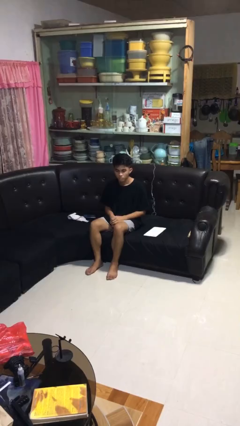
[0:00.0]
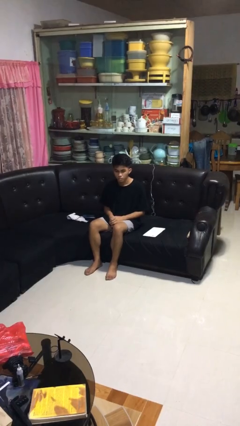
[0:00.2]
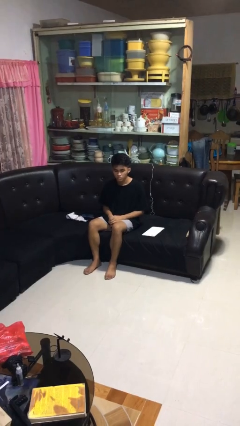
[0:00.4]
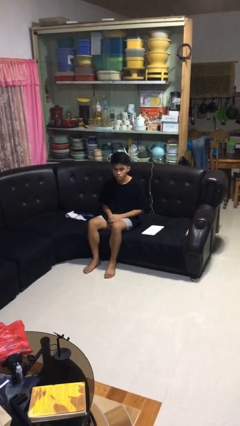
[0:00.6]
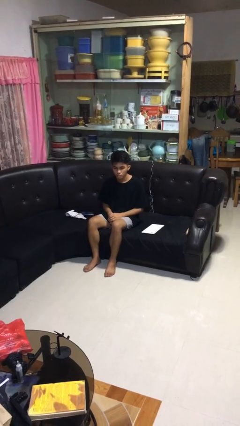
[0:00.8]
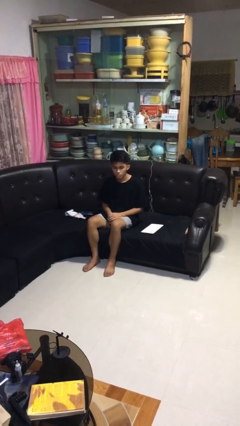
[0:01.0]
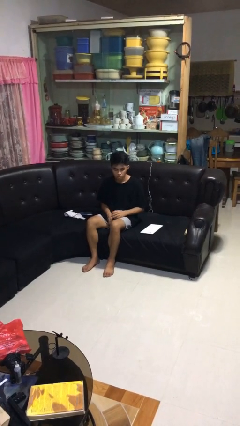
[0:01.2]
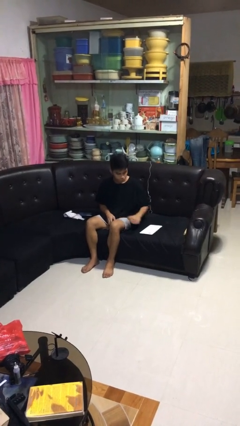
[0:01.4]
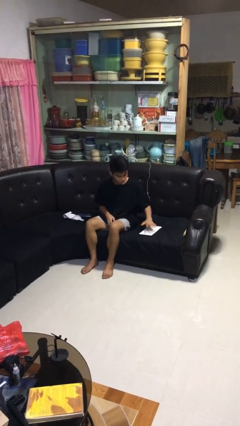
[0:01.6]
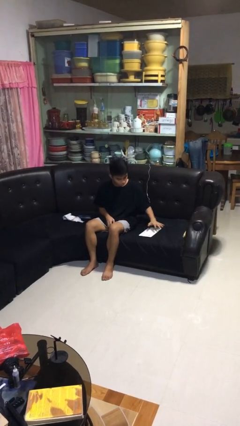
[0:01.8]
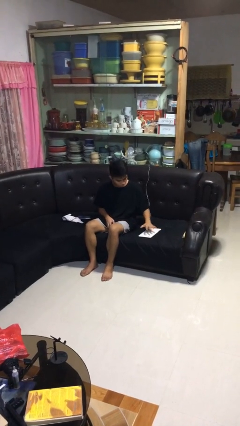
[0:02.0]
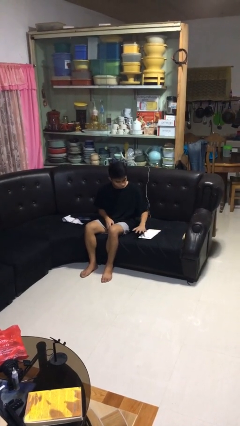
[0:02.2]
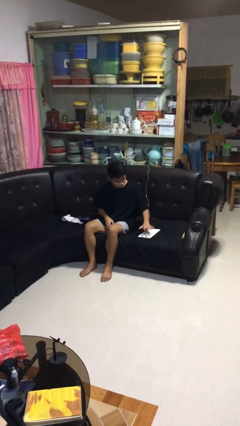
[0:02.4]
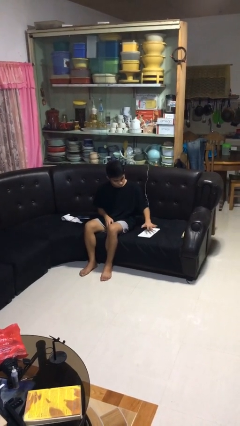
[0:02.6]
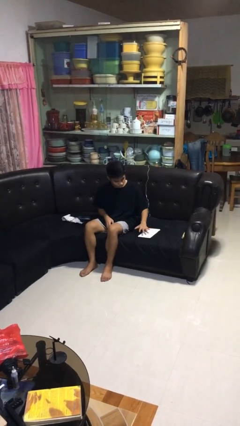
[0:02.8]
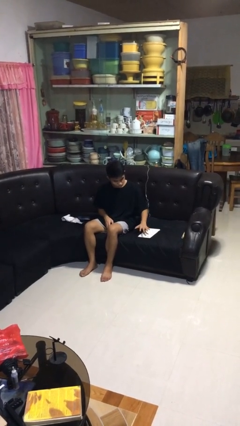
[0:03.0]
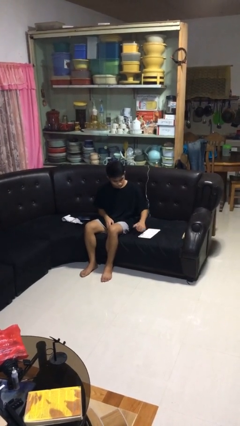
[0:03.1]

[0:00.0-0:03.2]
person waves hand over object

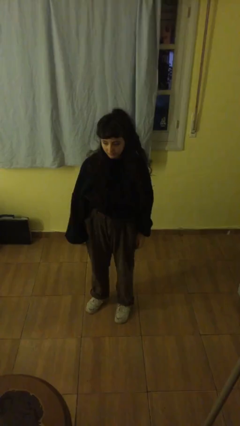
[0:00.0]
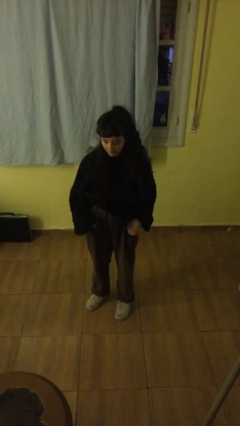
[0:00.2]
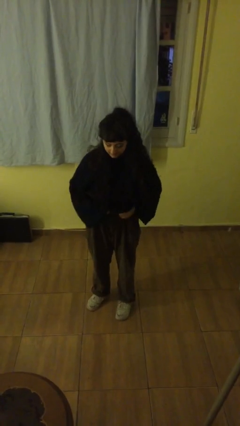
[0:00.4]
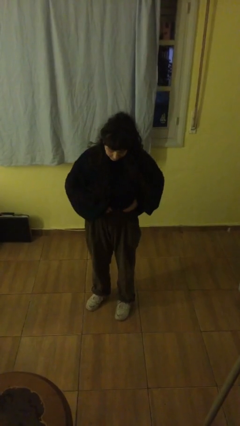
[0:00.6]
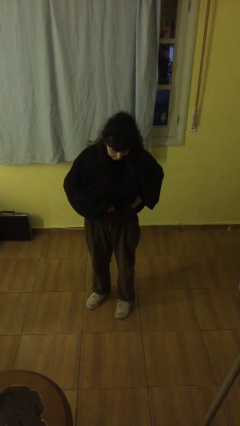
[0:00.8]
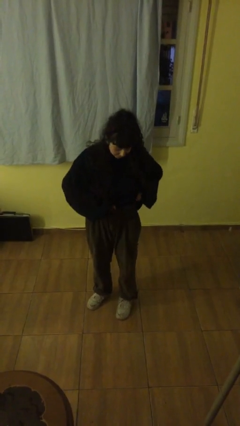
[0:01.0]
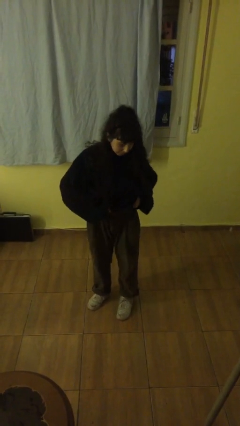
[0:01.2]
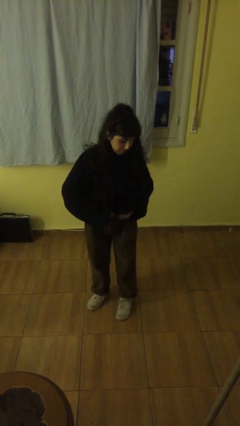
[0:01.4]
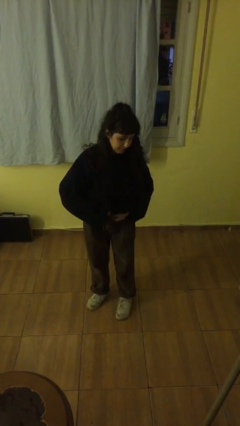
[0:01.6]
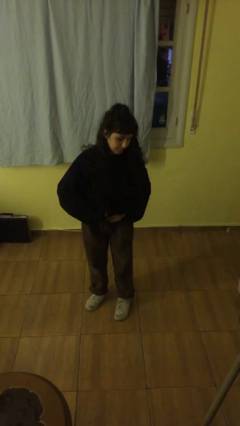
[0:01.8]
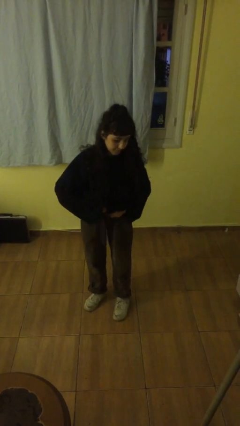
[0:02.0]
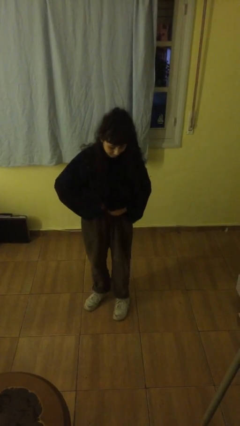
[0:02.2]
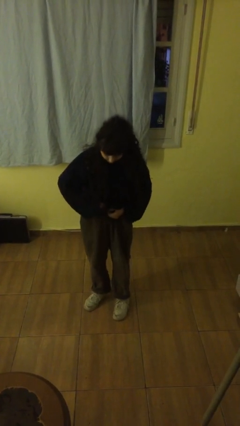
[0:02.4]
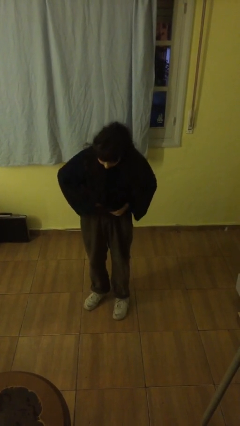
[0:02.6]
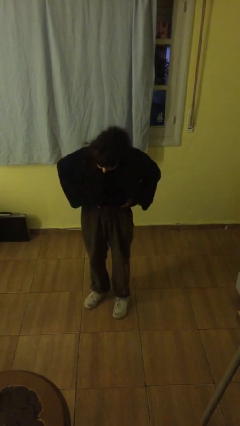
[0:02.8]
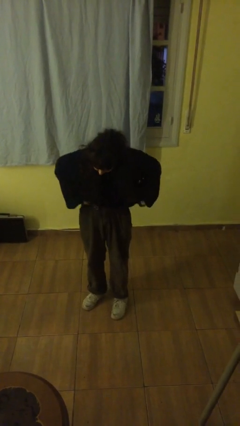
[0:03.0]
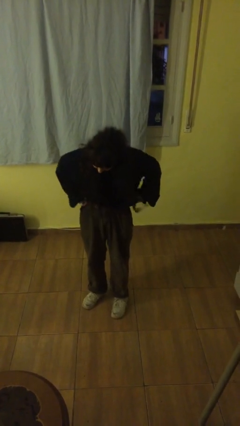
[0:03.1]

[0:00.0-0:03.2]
person hikes up pants

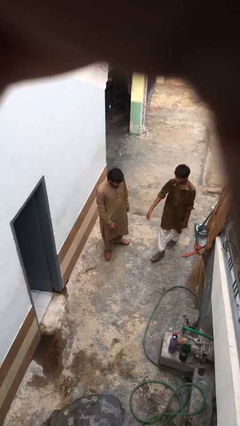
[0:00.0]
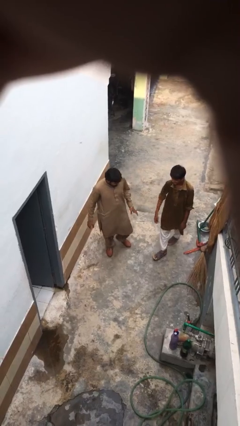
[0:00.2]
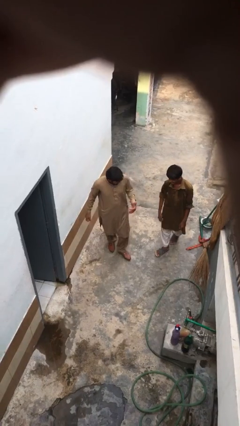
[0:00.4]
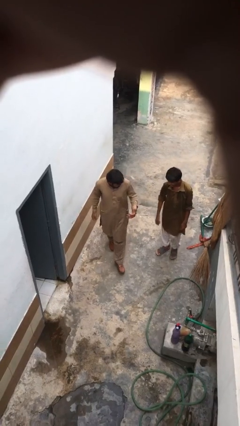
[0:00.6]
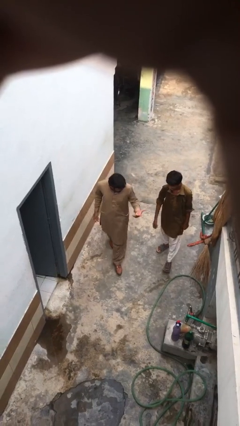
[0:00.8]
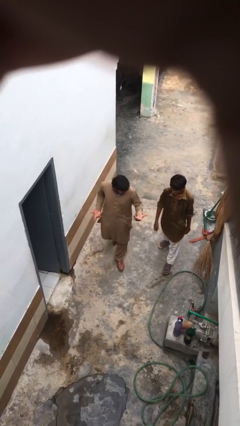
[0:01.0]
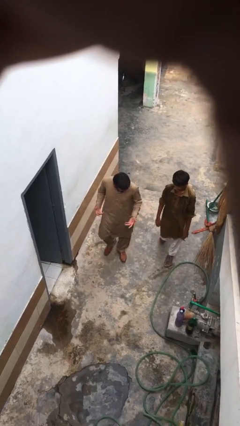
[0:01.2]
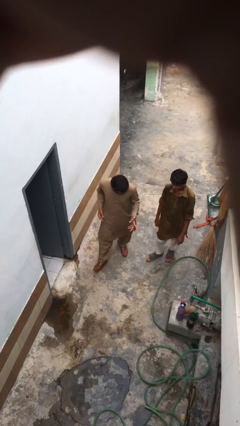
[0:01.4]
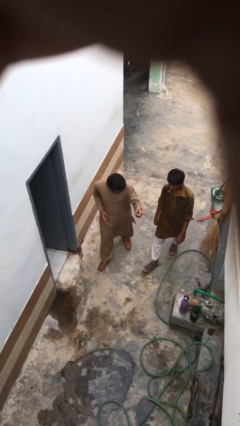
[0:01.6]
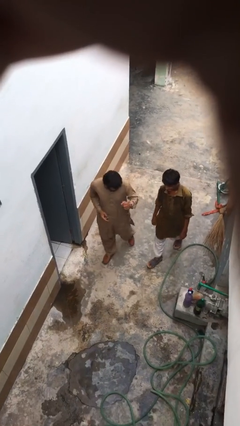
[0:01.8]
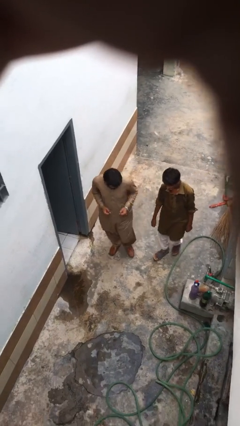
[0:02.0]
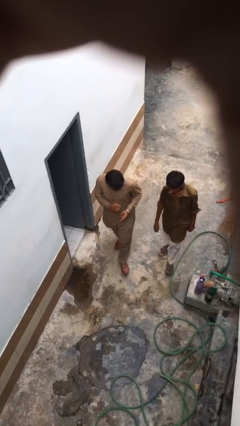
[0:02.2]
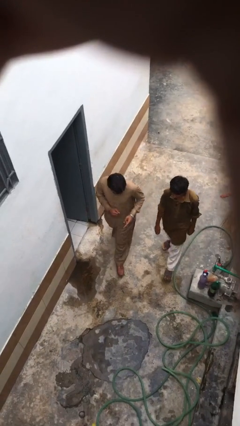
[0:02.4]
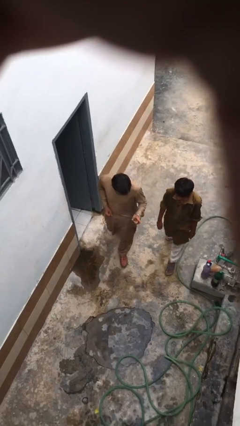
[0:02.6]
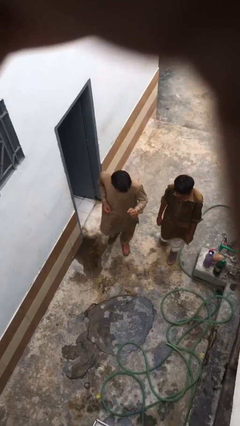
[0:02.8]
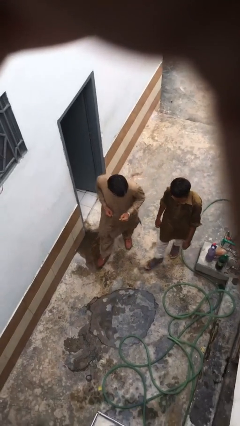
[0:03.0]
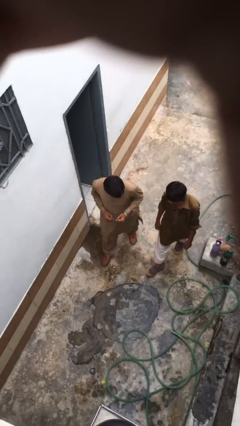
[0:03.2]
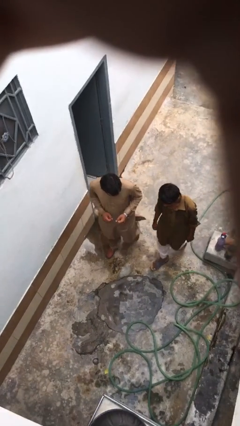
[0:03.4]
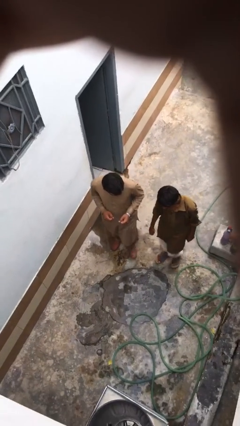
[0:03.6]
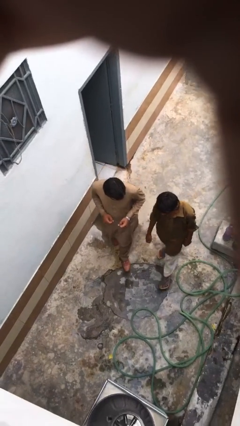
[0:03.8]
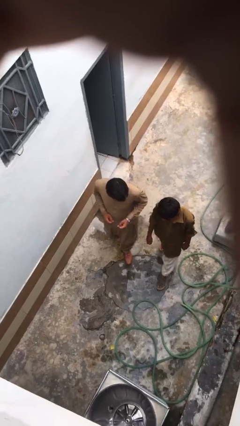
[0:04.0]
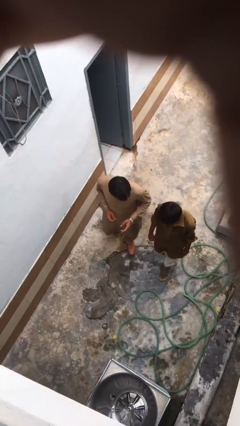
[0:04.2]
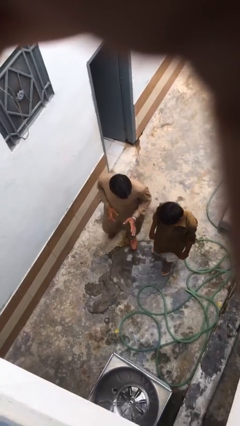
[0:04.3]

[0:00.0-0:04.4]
person talks to person

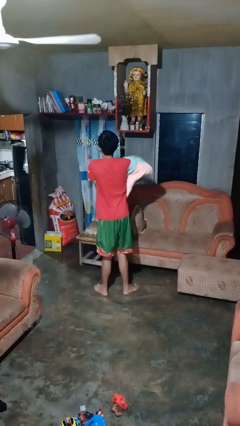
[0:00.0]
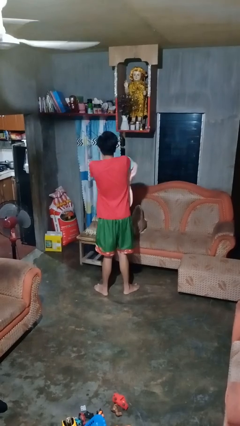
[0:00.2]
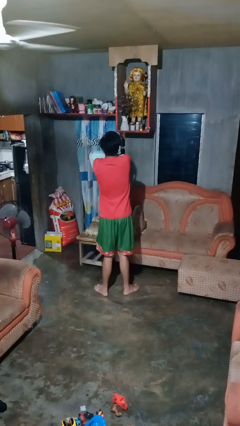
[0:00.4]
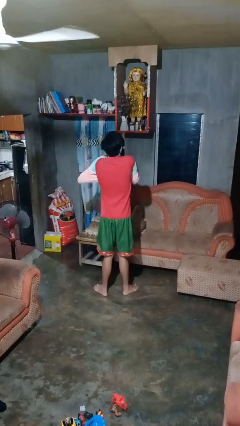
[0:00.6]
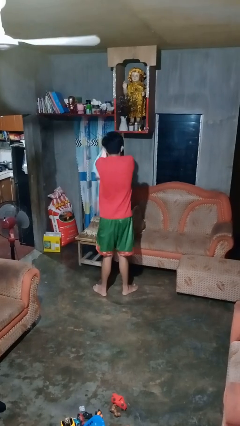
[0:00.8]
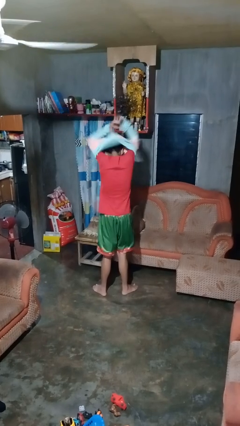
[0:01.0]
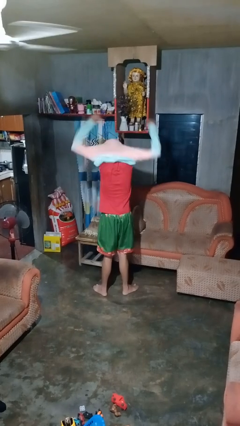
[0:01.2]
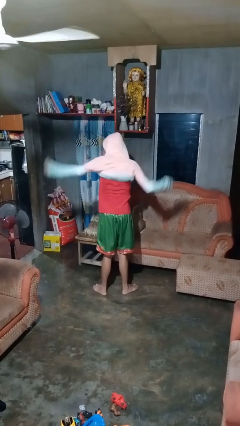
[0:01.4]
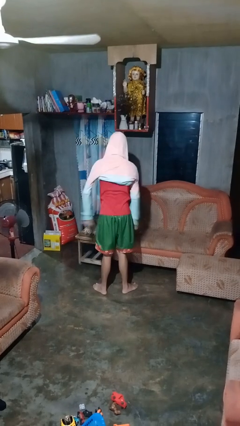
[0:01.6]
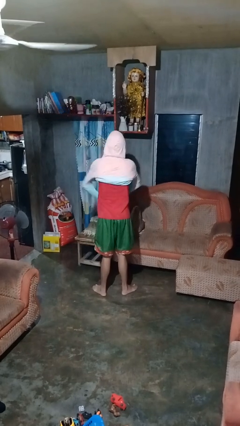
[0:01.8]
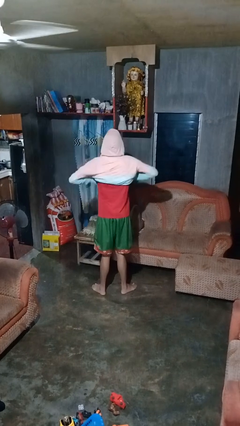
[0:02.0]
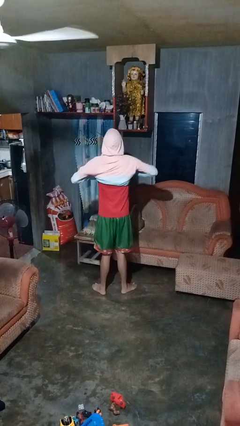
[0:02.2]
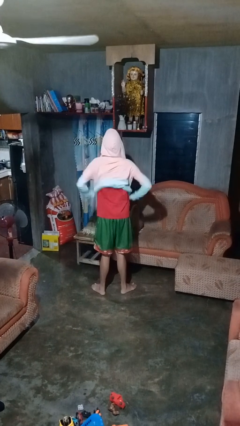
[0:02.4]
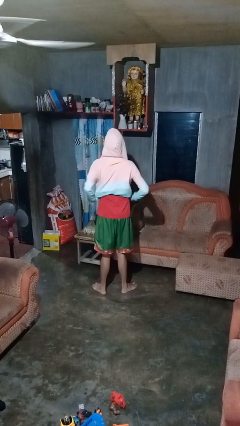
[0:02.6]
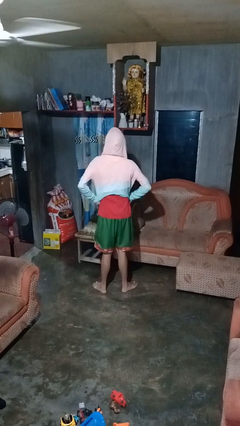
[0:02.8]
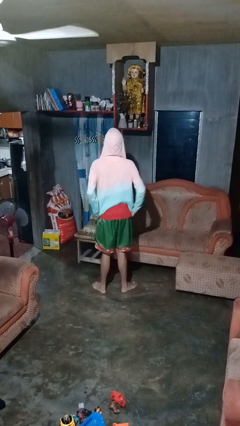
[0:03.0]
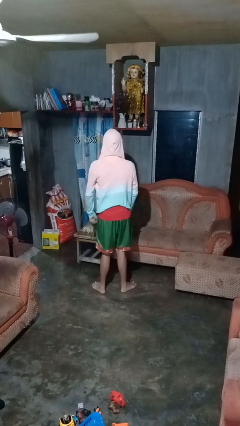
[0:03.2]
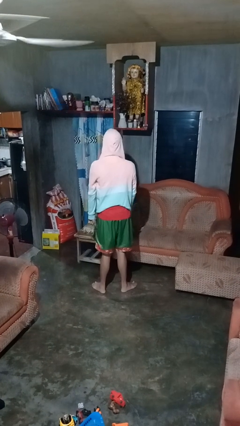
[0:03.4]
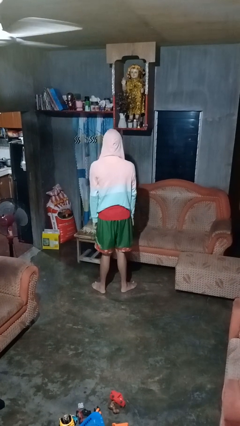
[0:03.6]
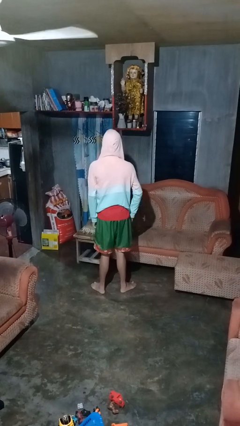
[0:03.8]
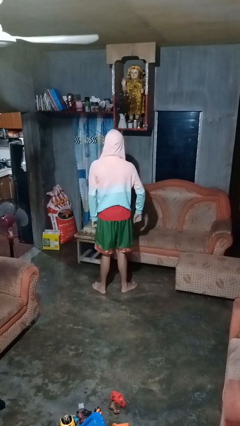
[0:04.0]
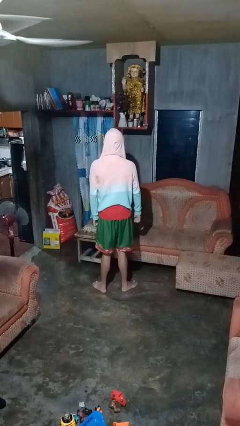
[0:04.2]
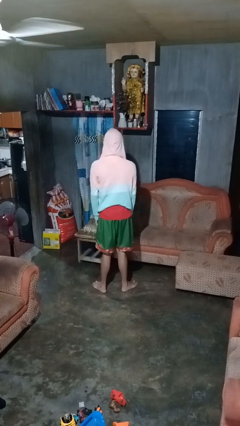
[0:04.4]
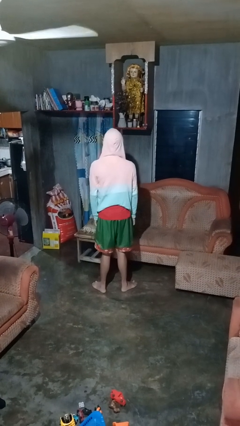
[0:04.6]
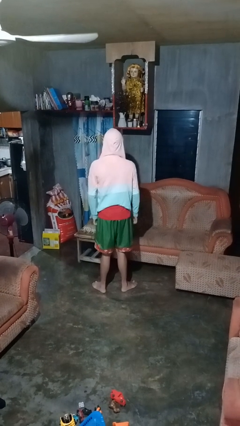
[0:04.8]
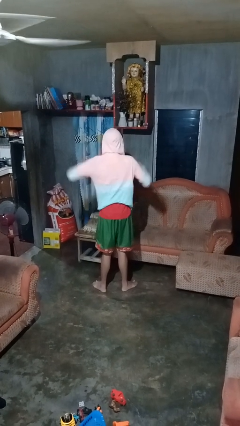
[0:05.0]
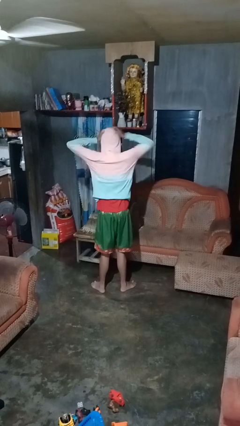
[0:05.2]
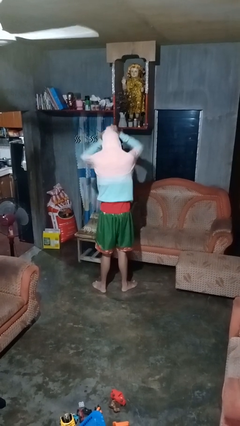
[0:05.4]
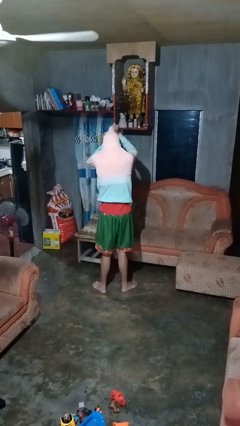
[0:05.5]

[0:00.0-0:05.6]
person puts on hoodie

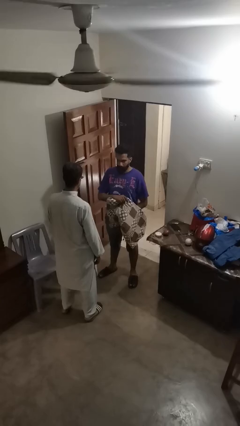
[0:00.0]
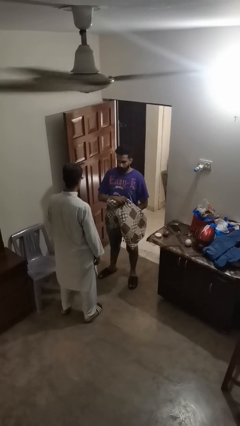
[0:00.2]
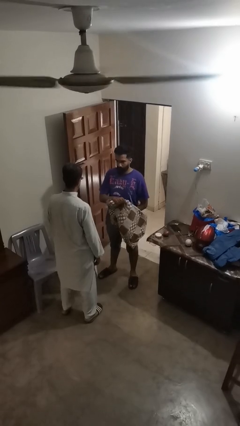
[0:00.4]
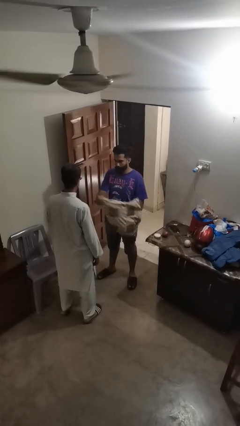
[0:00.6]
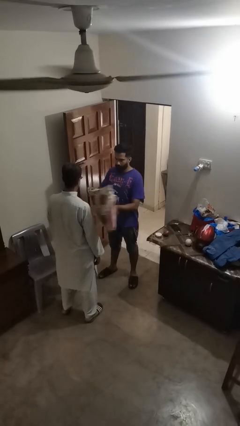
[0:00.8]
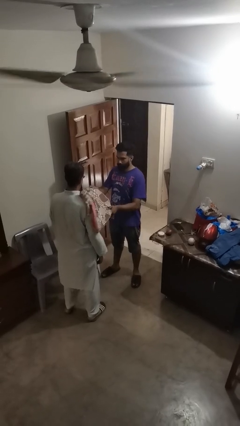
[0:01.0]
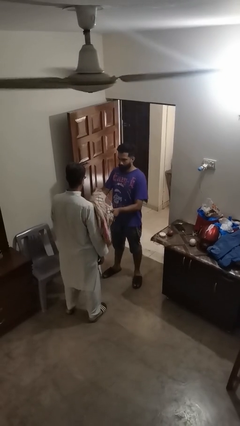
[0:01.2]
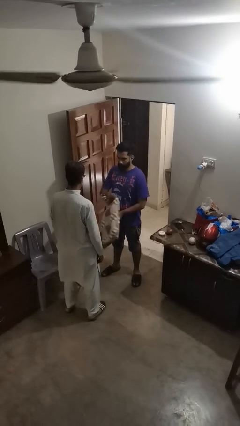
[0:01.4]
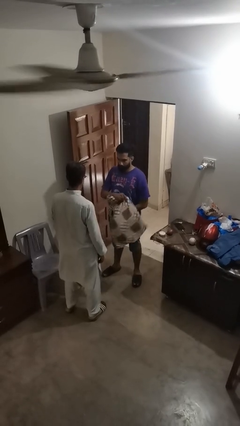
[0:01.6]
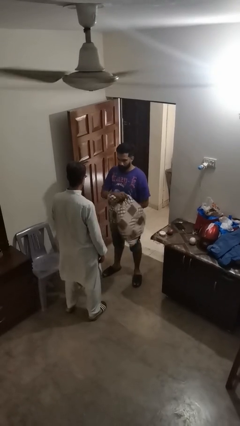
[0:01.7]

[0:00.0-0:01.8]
person hits person with pillow
